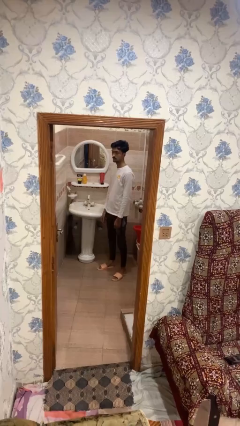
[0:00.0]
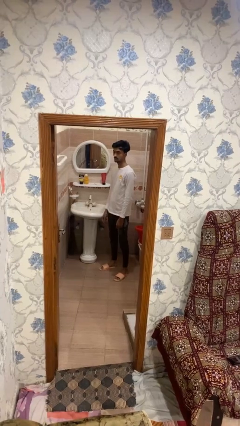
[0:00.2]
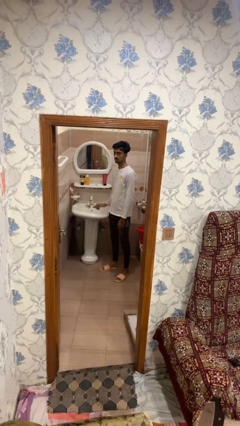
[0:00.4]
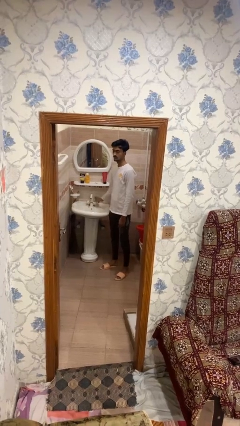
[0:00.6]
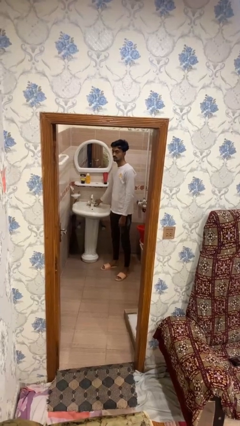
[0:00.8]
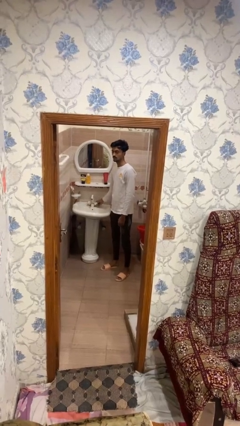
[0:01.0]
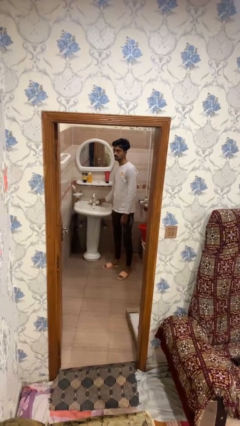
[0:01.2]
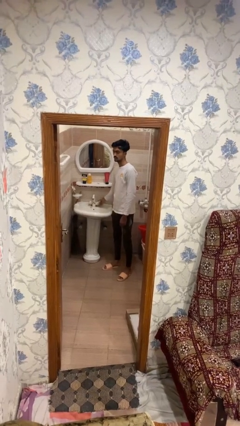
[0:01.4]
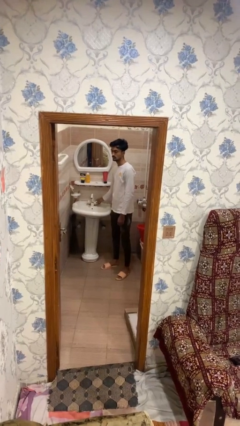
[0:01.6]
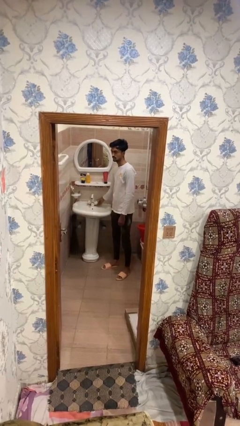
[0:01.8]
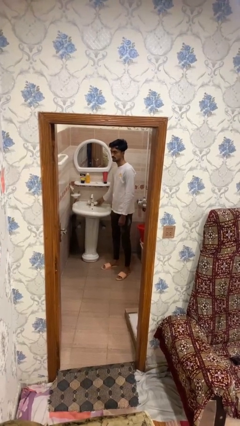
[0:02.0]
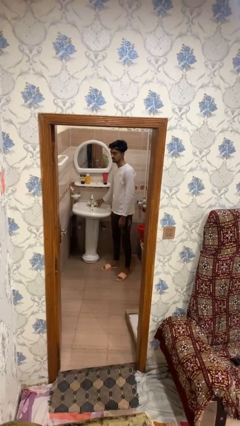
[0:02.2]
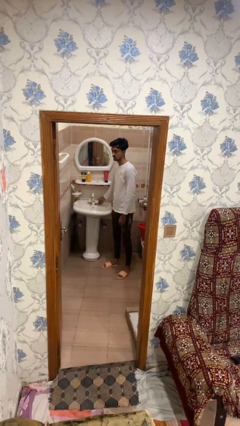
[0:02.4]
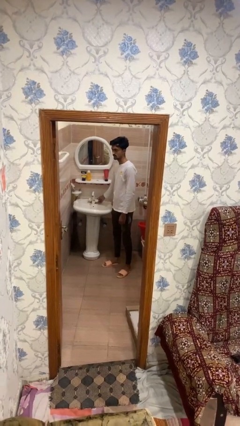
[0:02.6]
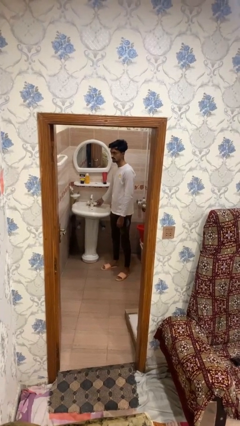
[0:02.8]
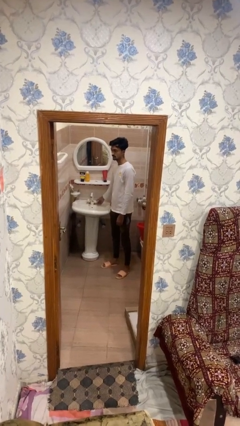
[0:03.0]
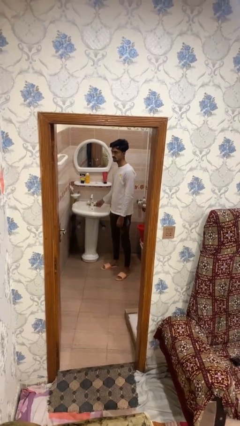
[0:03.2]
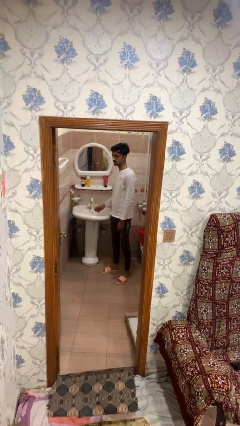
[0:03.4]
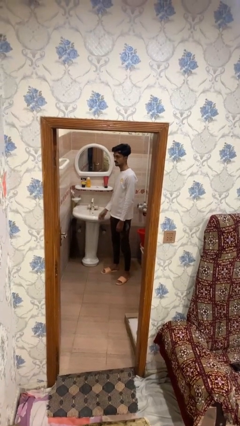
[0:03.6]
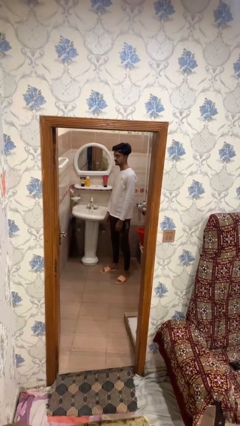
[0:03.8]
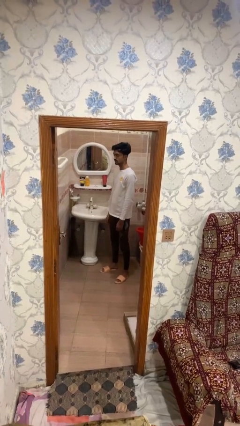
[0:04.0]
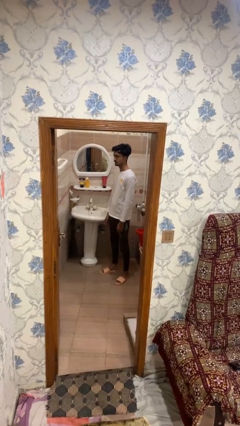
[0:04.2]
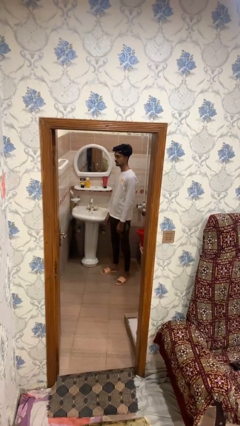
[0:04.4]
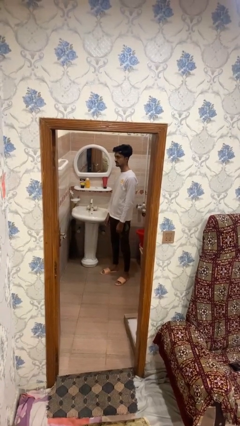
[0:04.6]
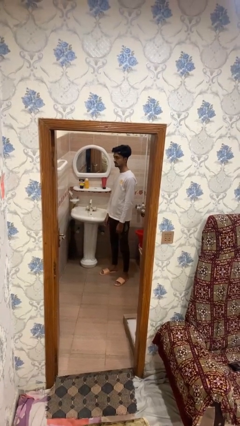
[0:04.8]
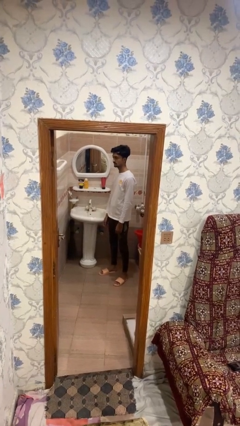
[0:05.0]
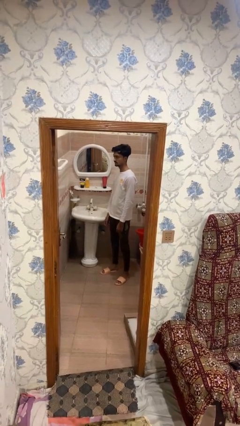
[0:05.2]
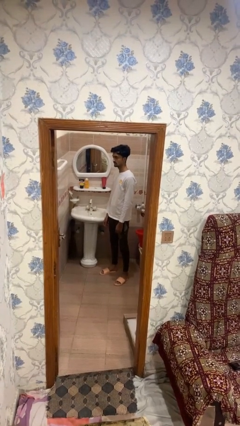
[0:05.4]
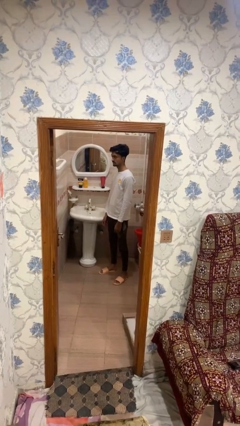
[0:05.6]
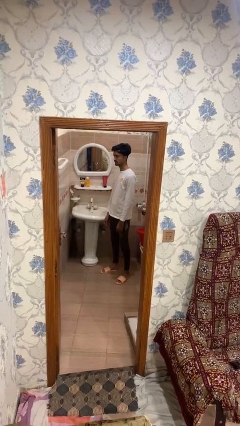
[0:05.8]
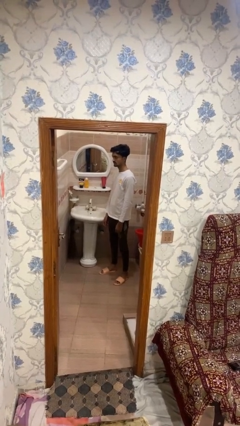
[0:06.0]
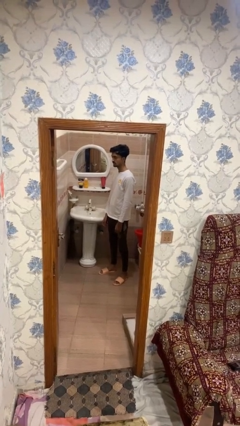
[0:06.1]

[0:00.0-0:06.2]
person turns on faucet

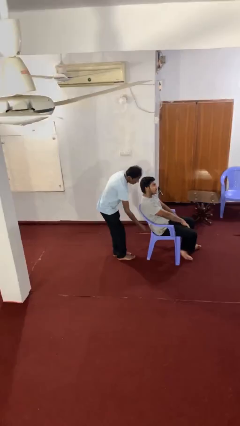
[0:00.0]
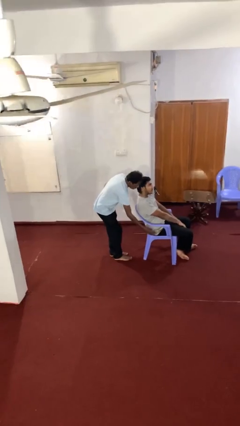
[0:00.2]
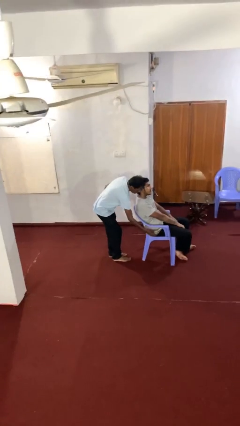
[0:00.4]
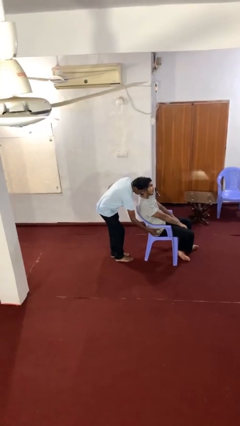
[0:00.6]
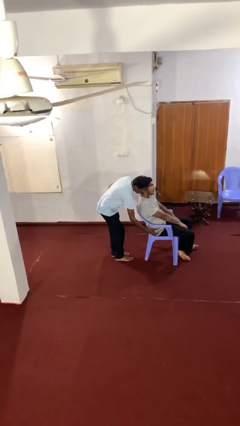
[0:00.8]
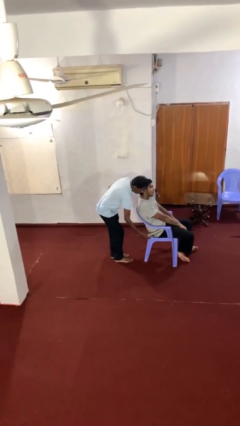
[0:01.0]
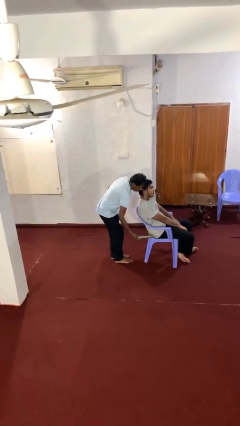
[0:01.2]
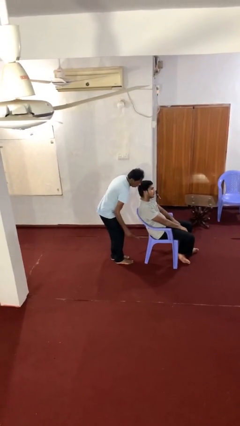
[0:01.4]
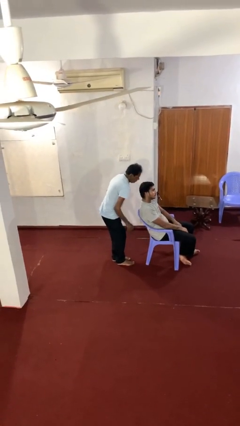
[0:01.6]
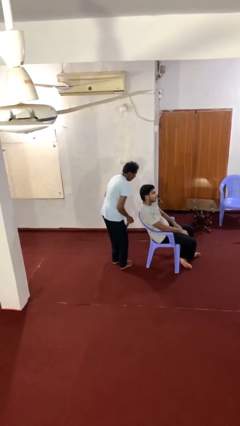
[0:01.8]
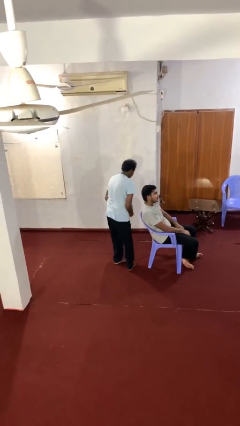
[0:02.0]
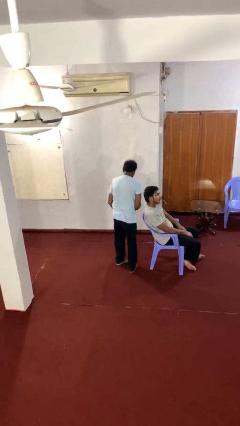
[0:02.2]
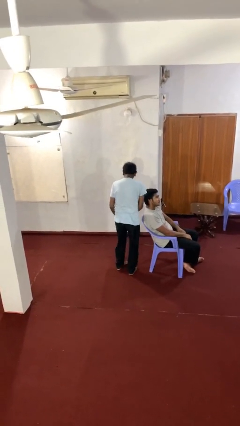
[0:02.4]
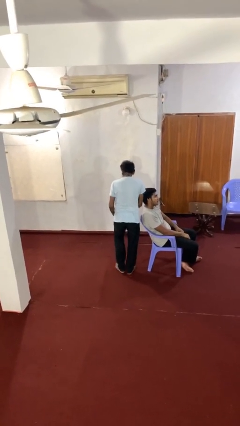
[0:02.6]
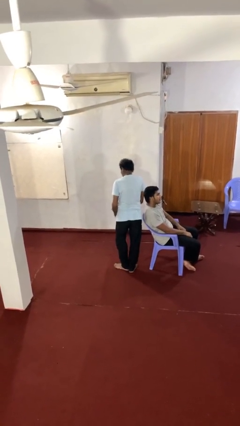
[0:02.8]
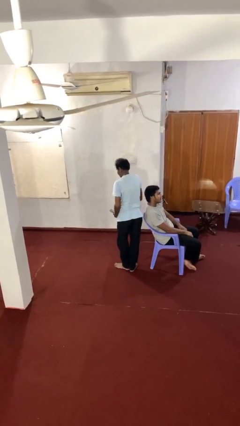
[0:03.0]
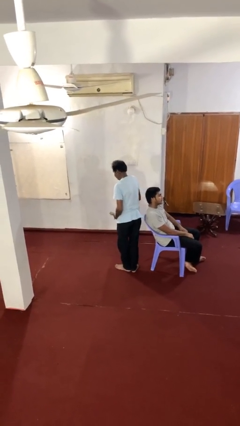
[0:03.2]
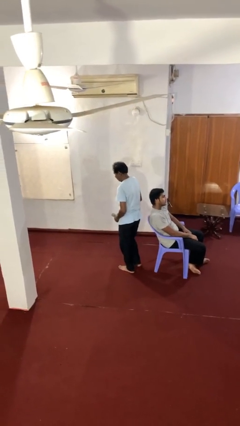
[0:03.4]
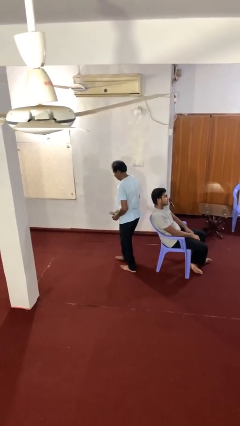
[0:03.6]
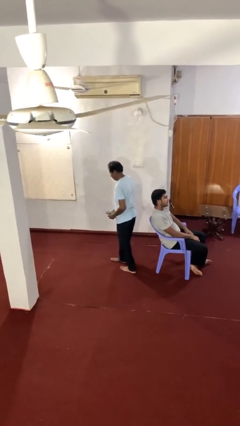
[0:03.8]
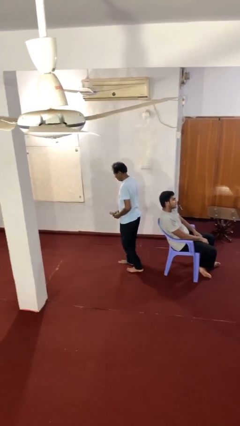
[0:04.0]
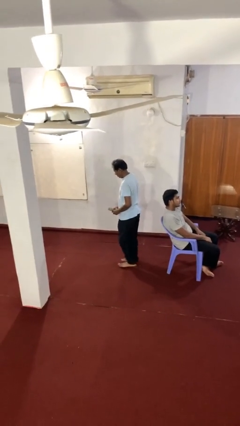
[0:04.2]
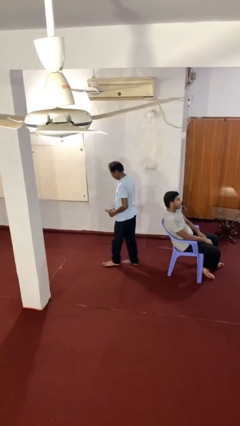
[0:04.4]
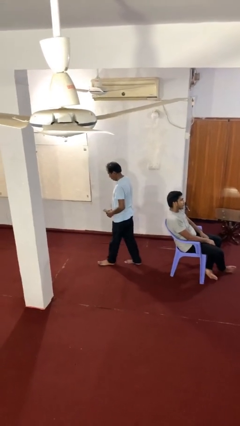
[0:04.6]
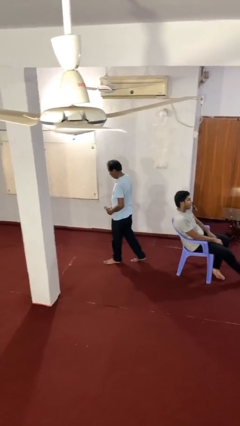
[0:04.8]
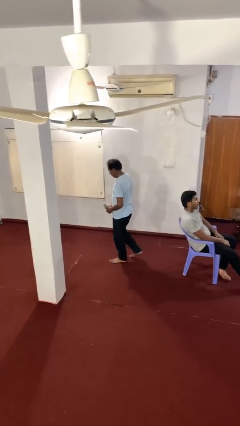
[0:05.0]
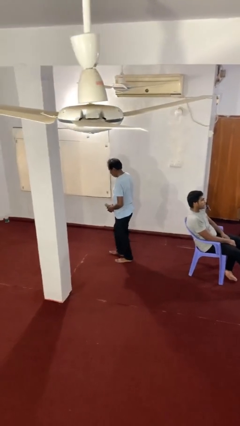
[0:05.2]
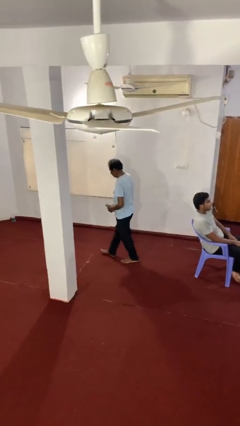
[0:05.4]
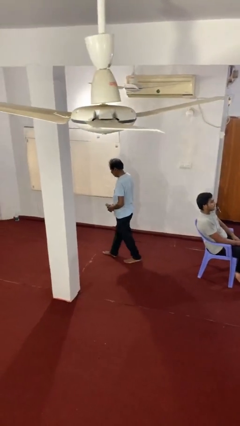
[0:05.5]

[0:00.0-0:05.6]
person steals object from person

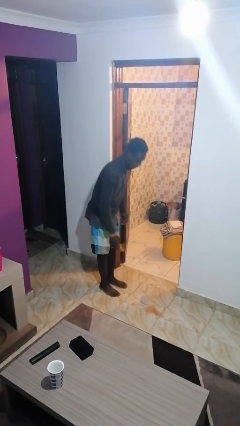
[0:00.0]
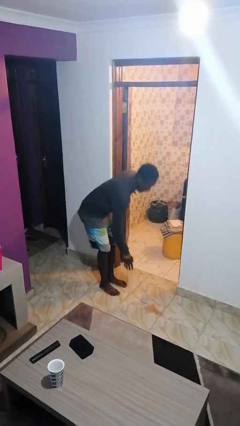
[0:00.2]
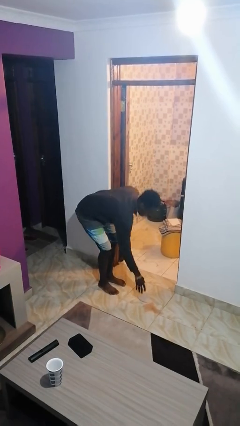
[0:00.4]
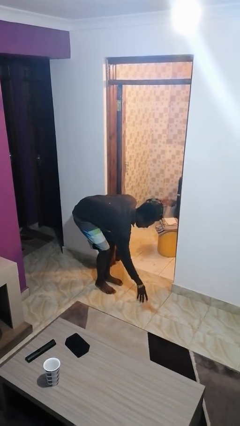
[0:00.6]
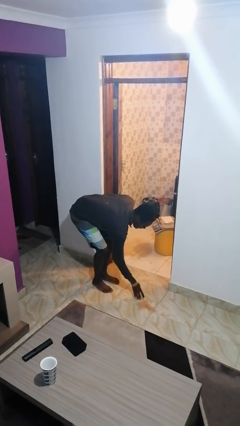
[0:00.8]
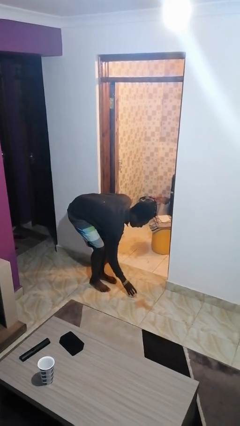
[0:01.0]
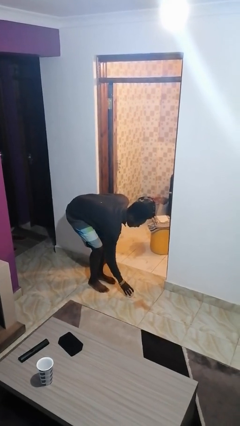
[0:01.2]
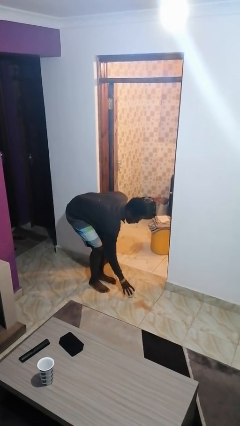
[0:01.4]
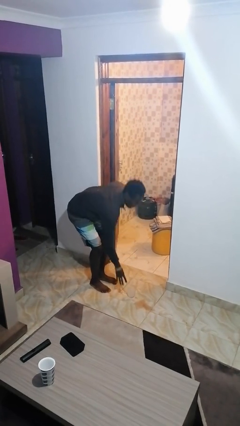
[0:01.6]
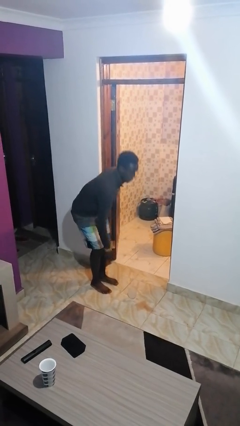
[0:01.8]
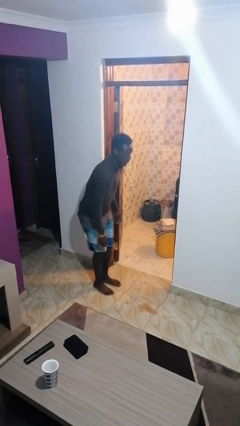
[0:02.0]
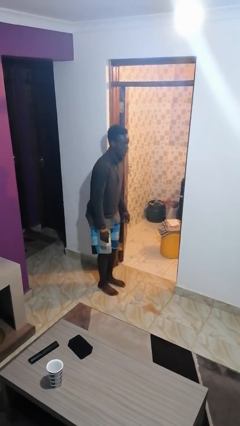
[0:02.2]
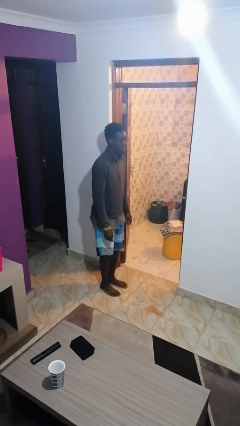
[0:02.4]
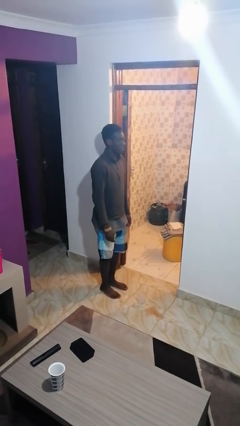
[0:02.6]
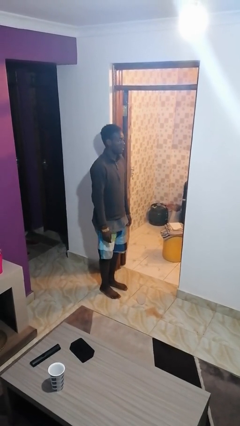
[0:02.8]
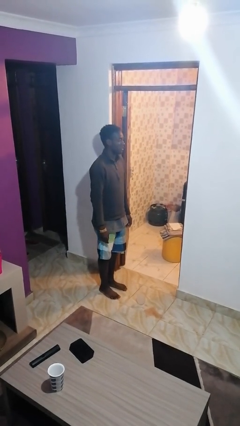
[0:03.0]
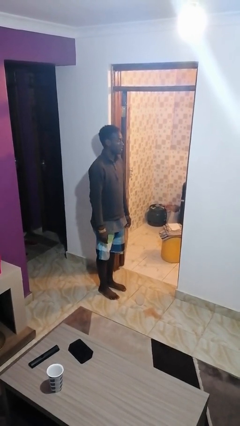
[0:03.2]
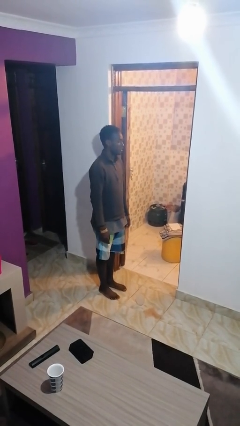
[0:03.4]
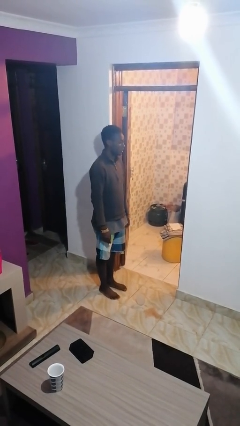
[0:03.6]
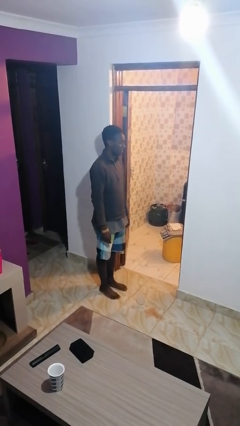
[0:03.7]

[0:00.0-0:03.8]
person sets upright glass

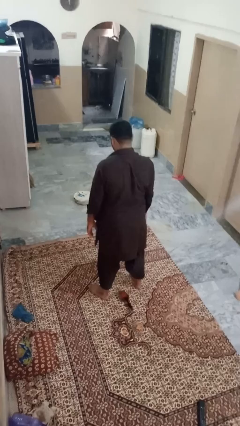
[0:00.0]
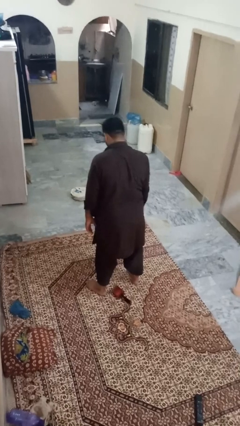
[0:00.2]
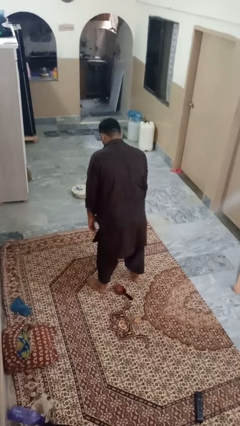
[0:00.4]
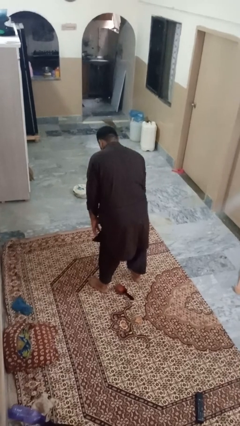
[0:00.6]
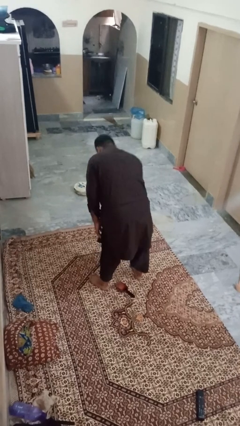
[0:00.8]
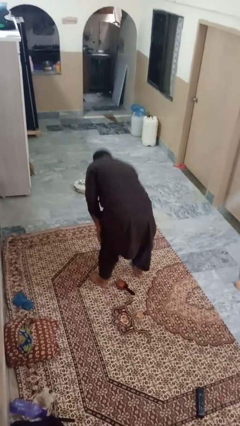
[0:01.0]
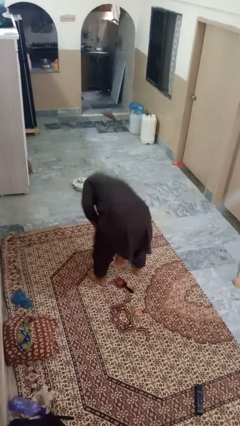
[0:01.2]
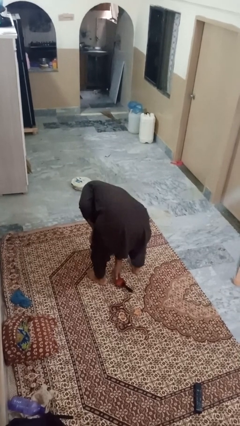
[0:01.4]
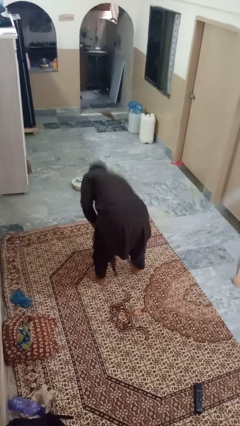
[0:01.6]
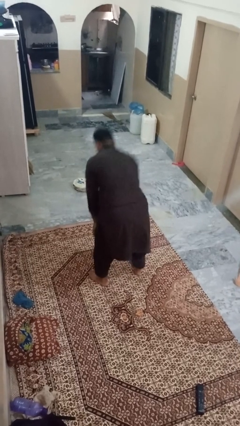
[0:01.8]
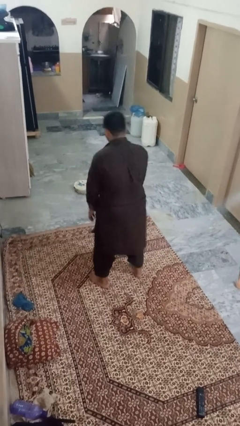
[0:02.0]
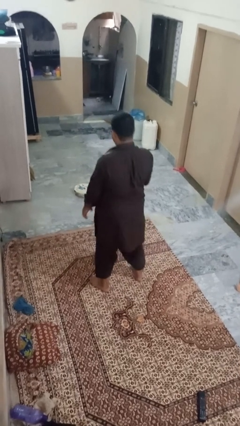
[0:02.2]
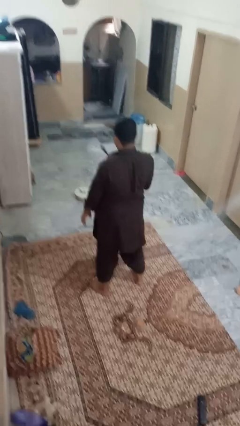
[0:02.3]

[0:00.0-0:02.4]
person picks up object from floor

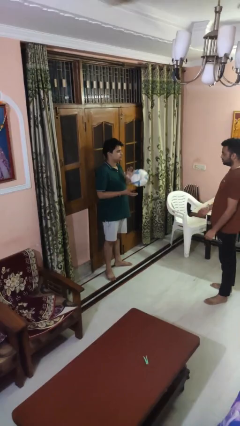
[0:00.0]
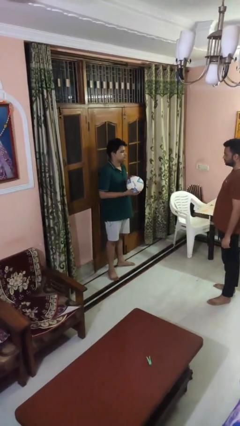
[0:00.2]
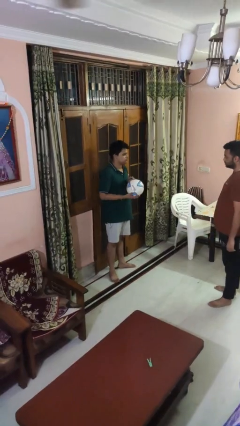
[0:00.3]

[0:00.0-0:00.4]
person catches object from person
